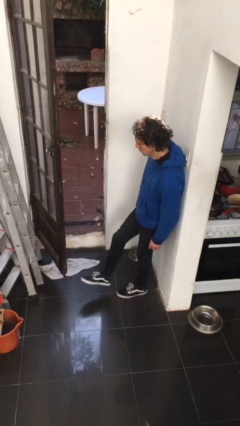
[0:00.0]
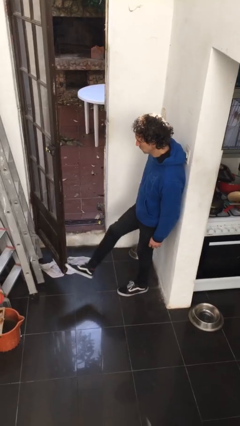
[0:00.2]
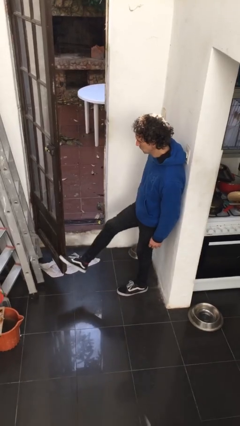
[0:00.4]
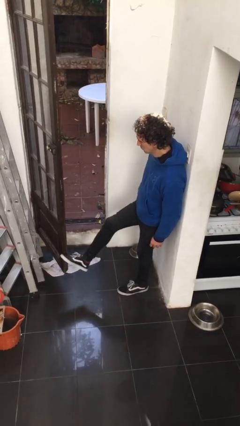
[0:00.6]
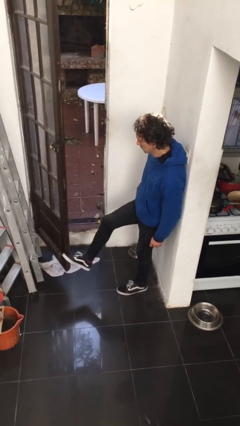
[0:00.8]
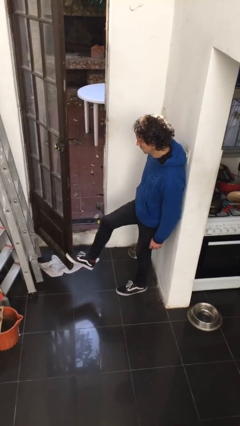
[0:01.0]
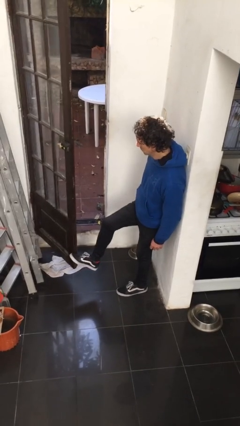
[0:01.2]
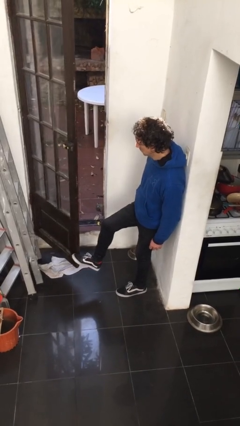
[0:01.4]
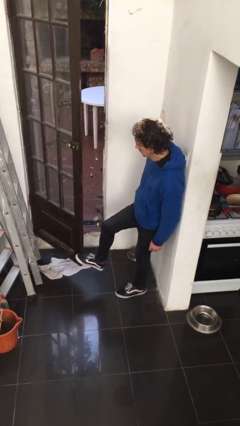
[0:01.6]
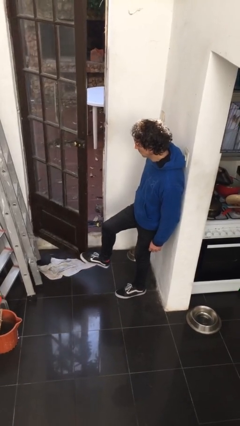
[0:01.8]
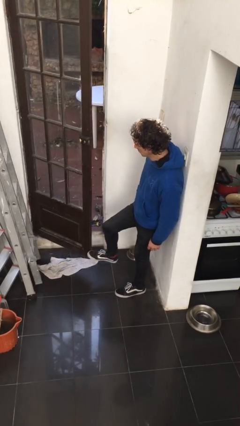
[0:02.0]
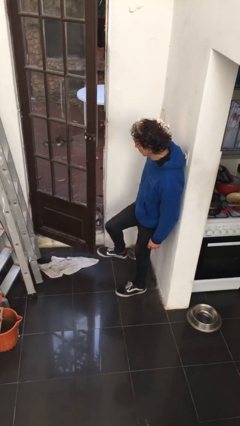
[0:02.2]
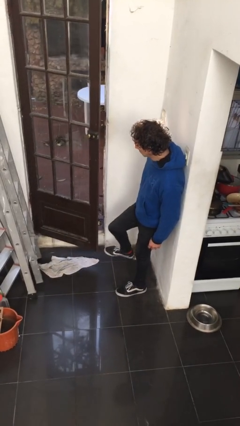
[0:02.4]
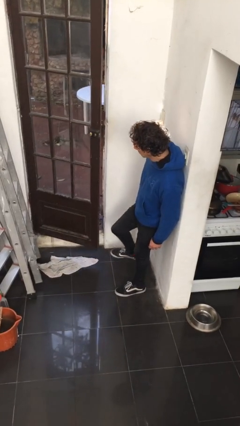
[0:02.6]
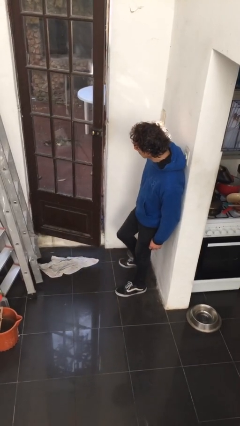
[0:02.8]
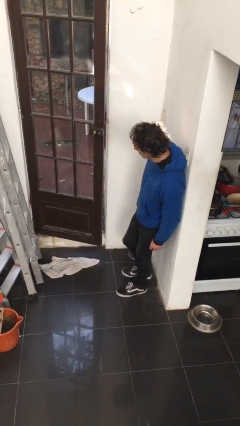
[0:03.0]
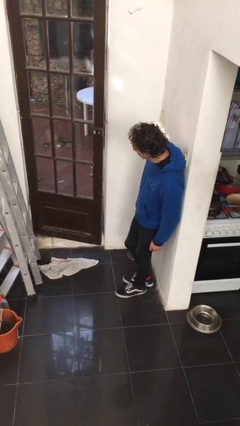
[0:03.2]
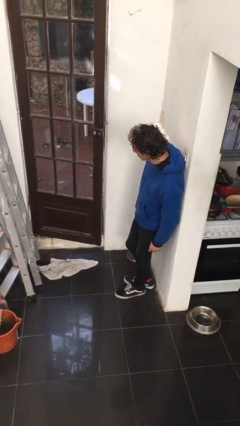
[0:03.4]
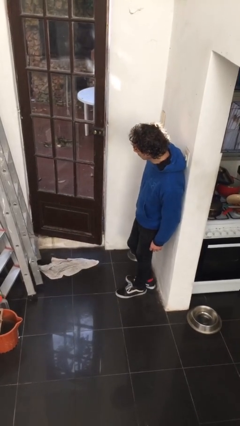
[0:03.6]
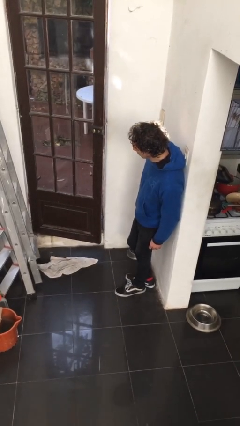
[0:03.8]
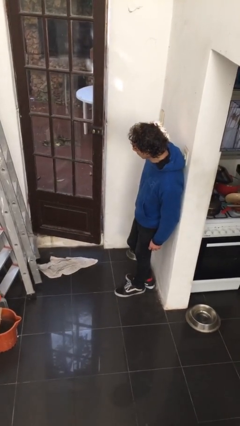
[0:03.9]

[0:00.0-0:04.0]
person closes door with foot

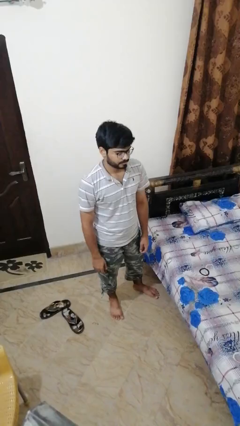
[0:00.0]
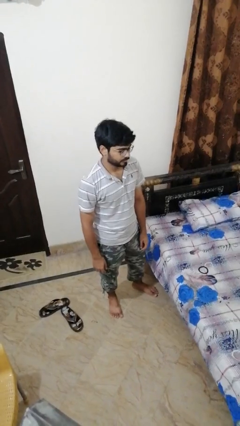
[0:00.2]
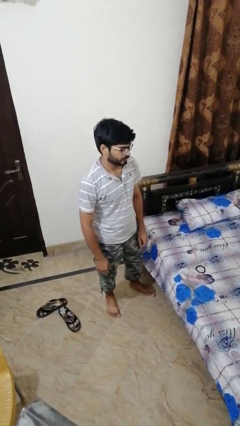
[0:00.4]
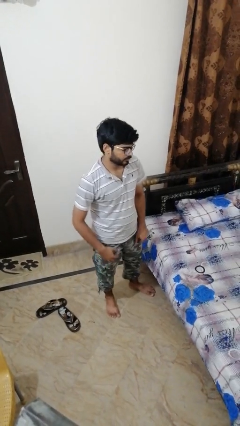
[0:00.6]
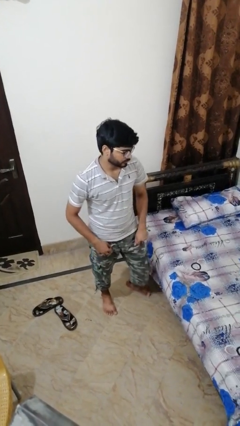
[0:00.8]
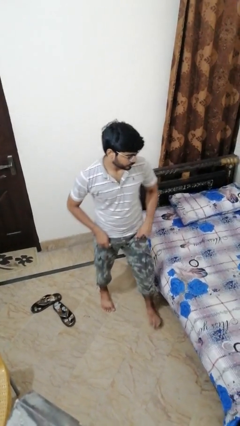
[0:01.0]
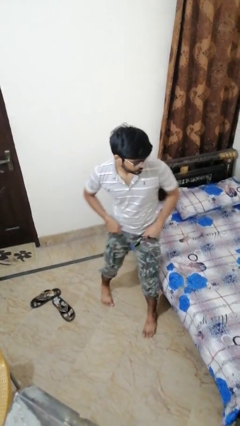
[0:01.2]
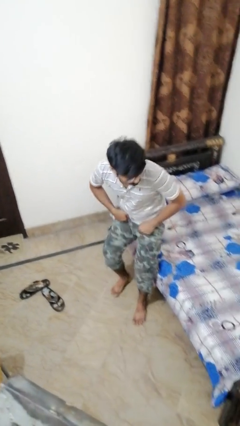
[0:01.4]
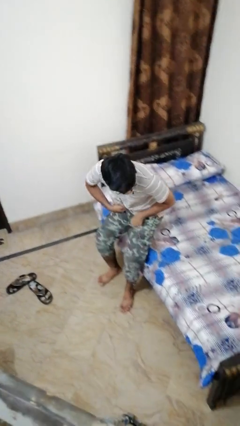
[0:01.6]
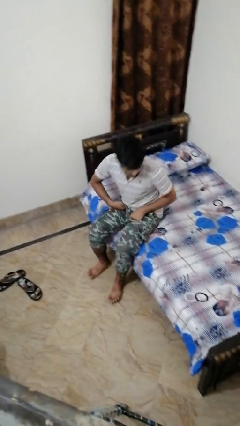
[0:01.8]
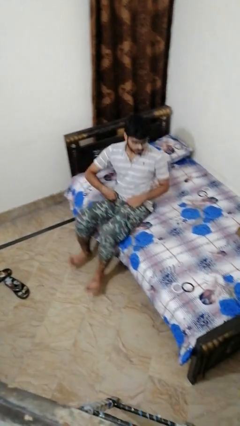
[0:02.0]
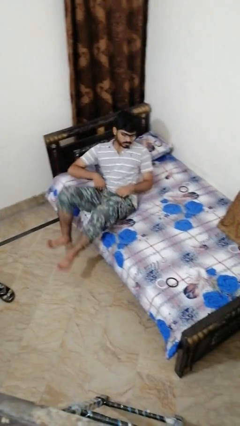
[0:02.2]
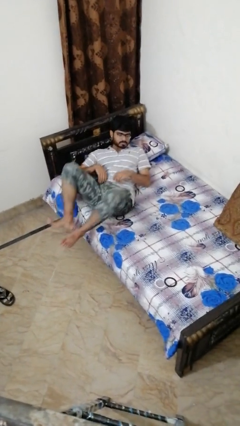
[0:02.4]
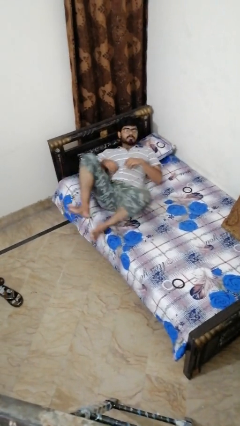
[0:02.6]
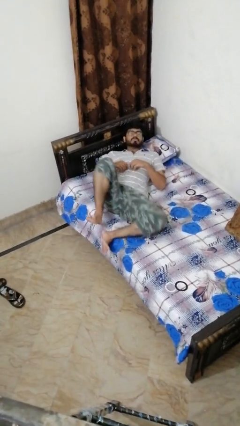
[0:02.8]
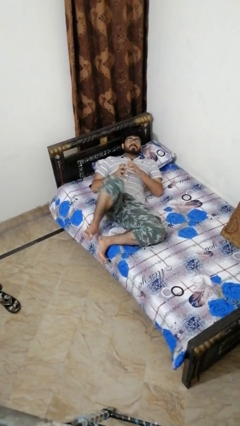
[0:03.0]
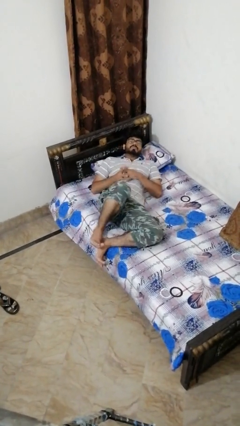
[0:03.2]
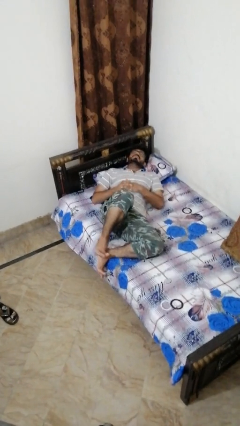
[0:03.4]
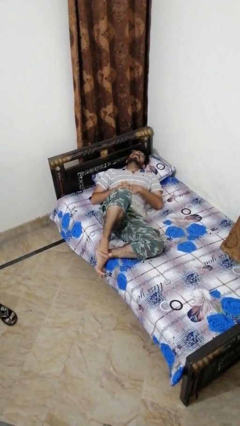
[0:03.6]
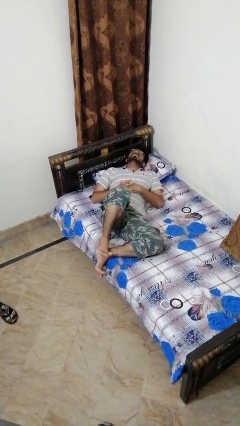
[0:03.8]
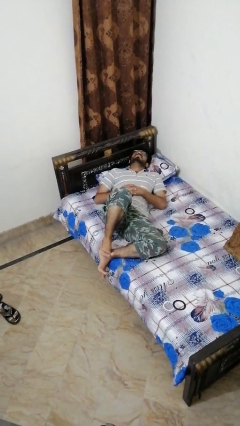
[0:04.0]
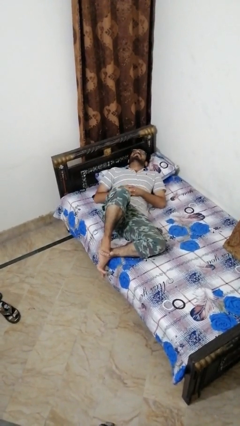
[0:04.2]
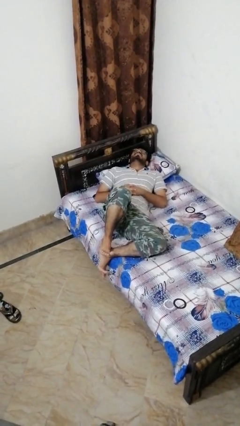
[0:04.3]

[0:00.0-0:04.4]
person lies down on bed

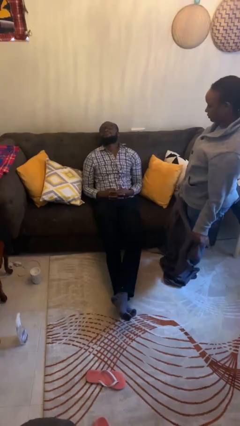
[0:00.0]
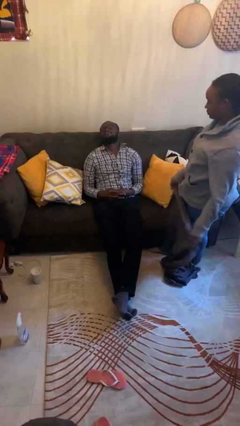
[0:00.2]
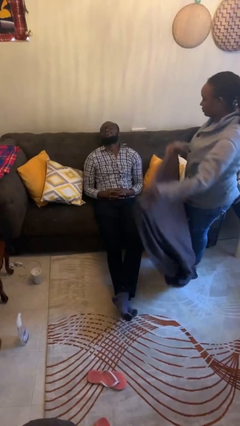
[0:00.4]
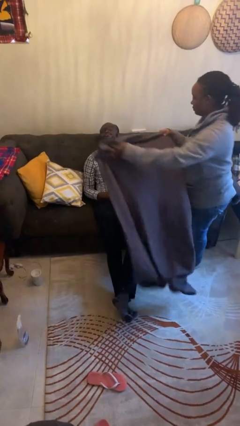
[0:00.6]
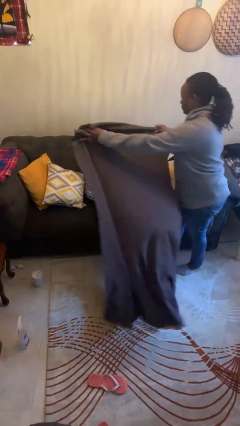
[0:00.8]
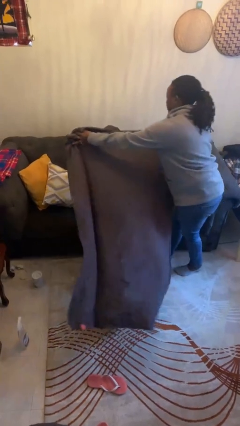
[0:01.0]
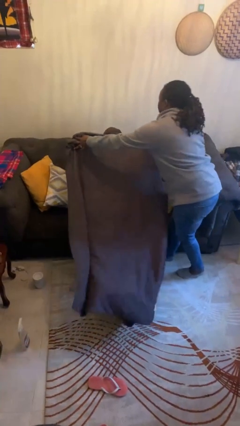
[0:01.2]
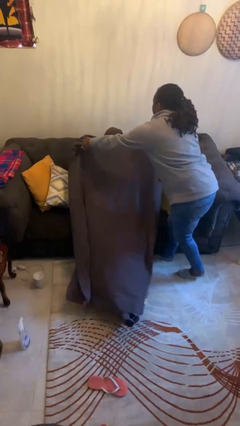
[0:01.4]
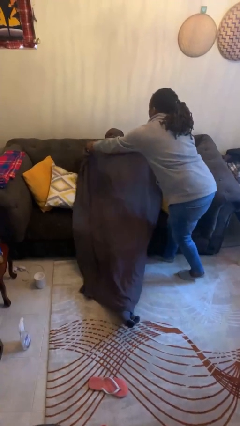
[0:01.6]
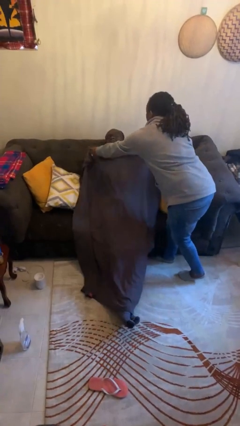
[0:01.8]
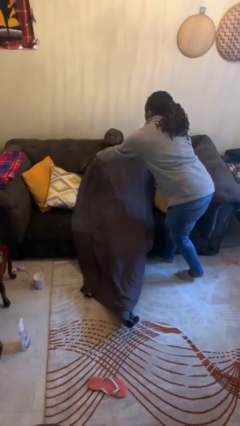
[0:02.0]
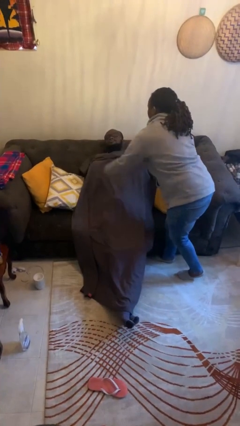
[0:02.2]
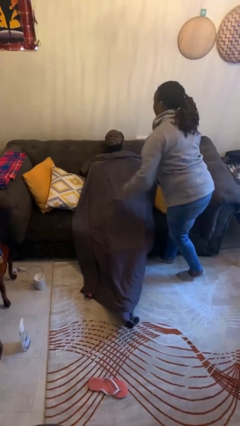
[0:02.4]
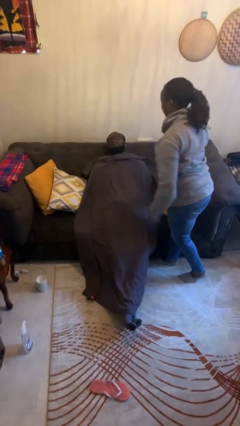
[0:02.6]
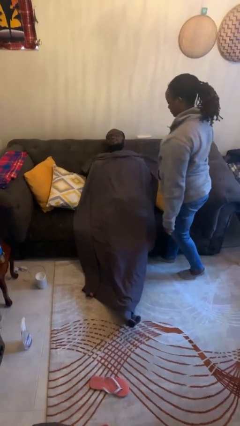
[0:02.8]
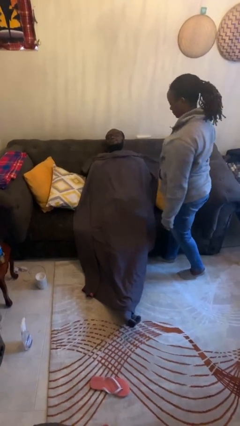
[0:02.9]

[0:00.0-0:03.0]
person covers friend with blanket

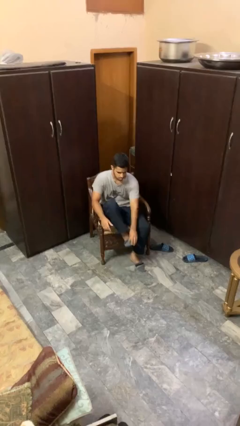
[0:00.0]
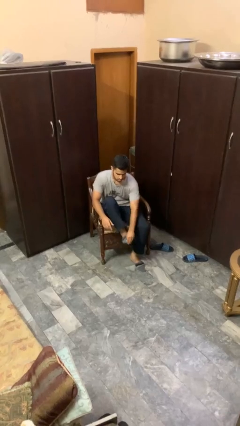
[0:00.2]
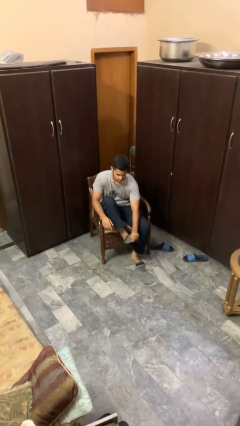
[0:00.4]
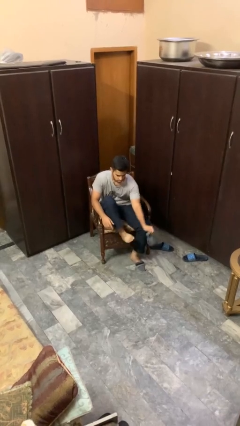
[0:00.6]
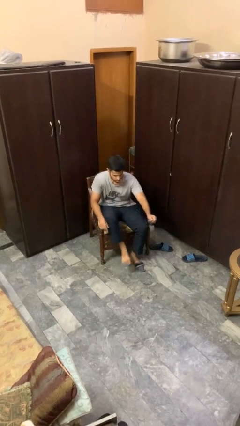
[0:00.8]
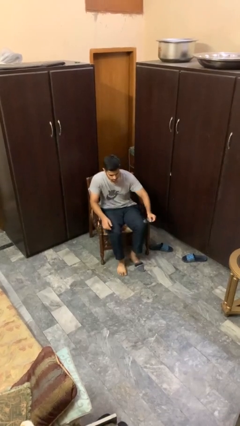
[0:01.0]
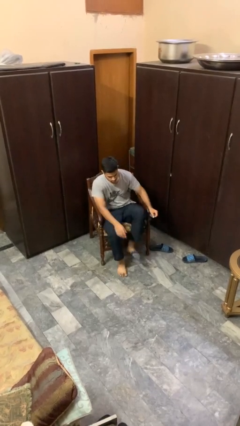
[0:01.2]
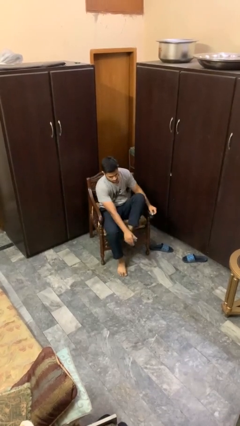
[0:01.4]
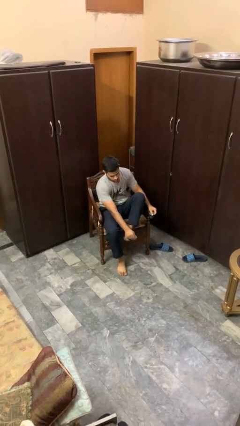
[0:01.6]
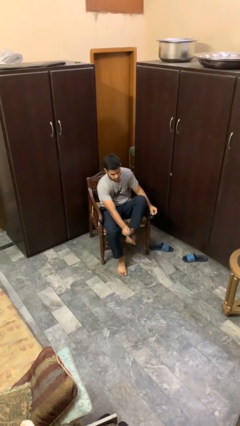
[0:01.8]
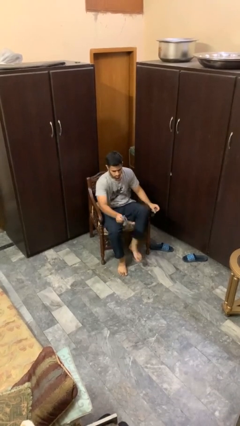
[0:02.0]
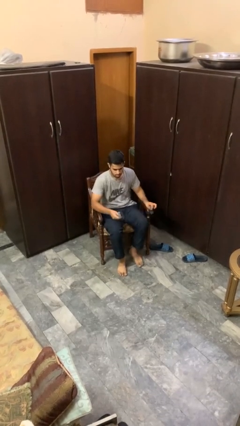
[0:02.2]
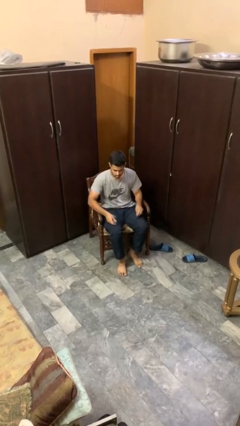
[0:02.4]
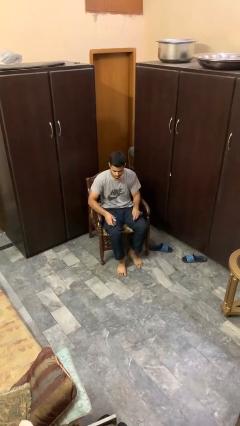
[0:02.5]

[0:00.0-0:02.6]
person takes off socks

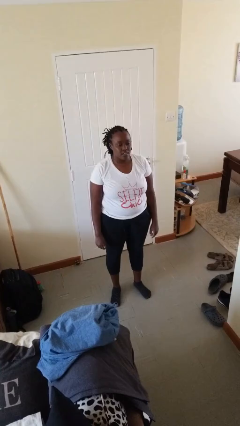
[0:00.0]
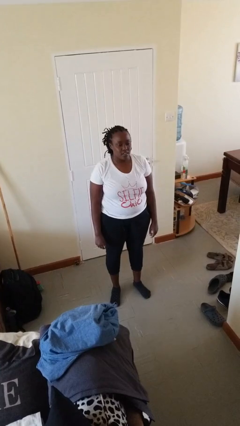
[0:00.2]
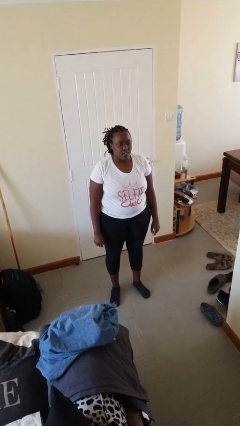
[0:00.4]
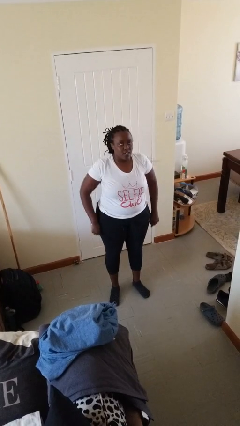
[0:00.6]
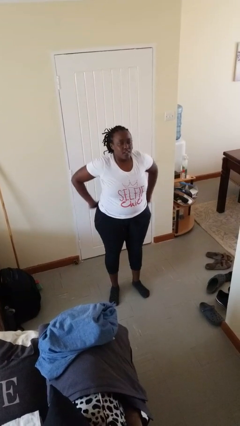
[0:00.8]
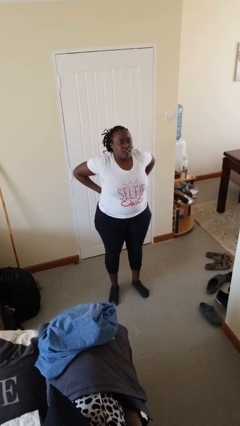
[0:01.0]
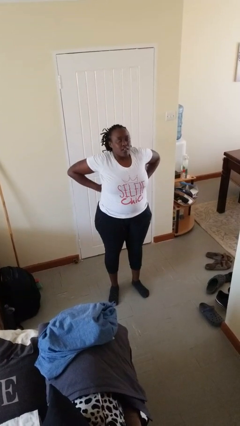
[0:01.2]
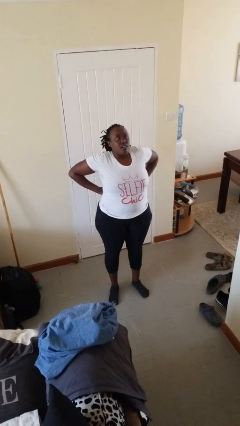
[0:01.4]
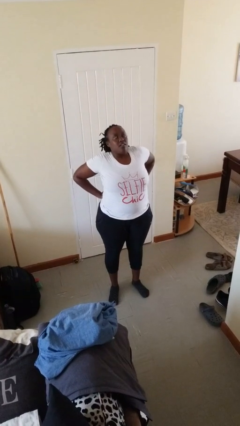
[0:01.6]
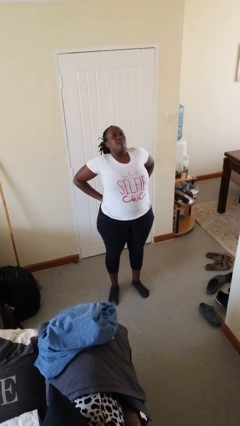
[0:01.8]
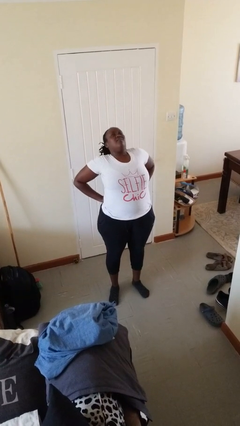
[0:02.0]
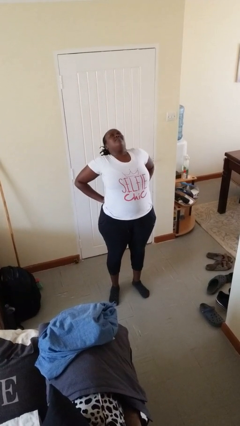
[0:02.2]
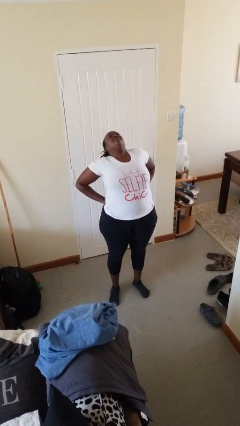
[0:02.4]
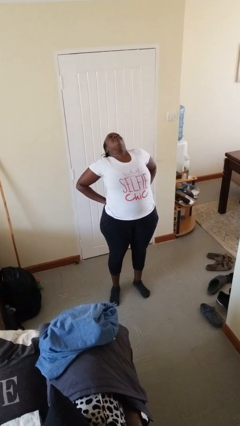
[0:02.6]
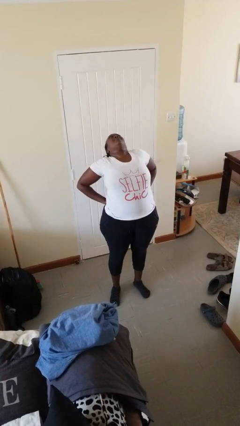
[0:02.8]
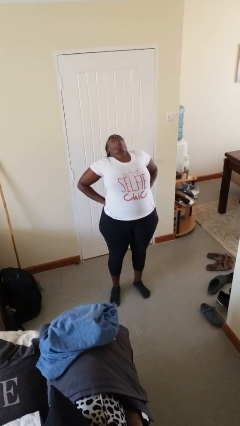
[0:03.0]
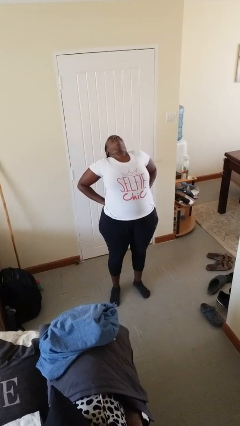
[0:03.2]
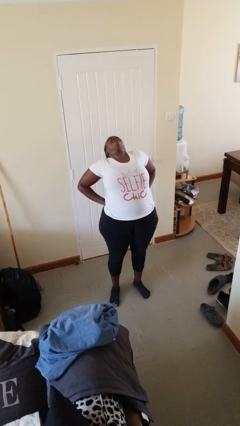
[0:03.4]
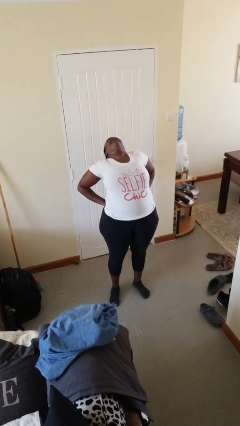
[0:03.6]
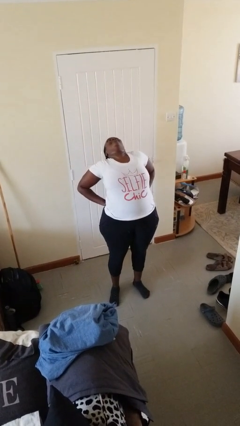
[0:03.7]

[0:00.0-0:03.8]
person stretches back
